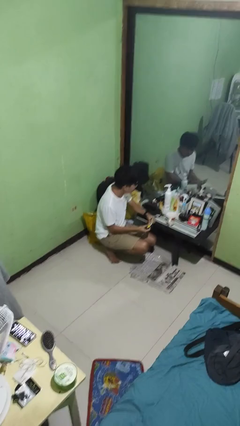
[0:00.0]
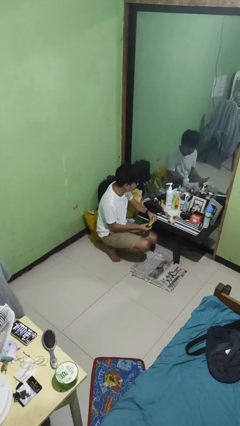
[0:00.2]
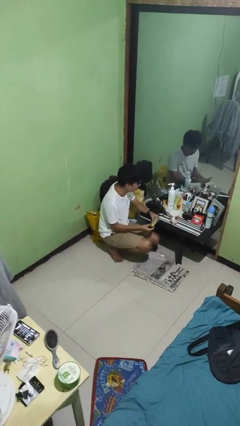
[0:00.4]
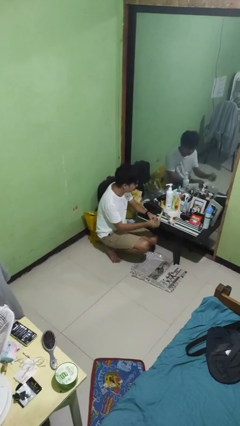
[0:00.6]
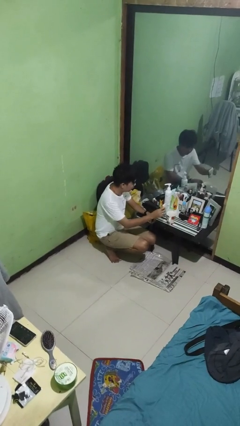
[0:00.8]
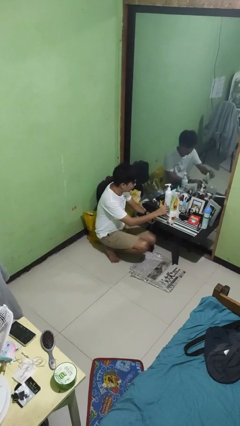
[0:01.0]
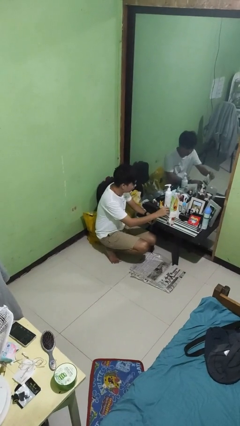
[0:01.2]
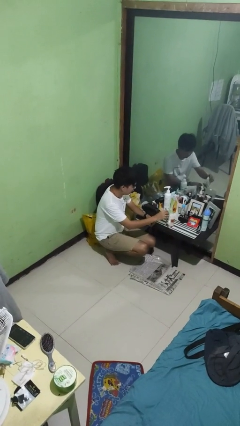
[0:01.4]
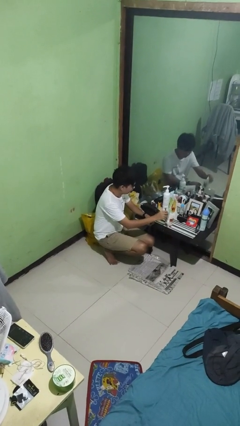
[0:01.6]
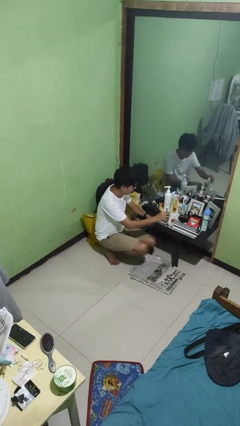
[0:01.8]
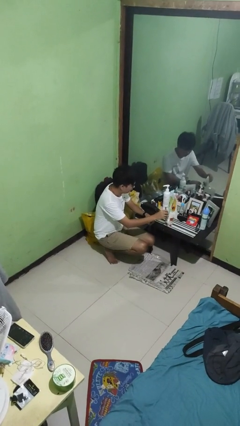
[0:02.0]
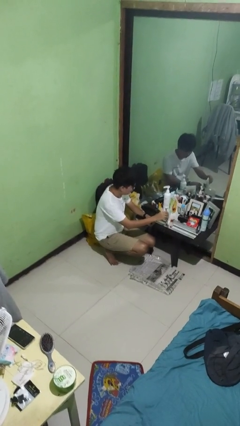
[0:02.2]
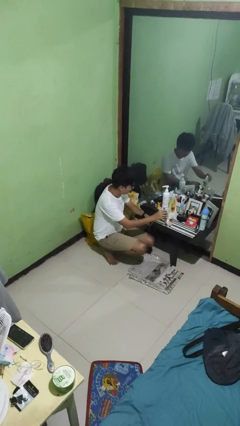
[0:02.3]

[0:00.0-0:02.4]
person pours coffee into mug

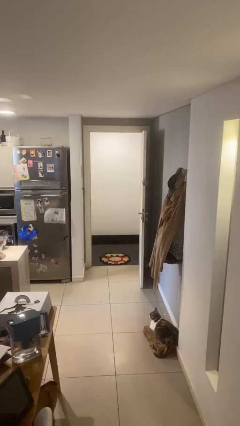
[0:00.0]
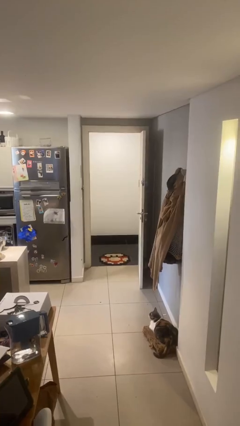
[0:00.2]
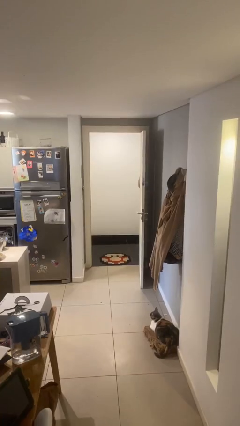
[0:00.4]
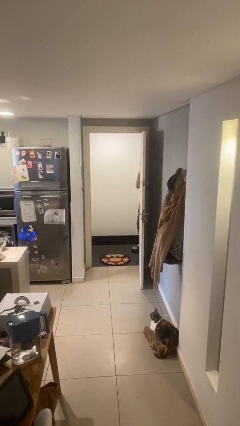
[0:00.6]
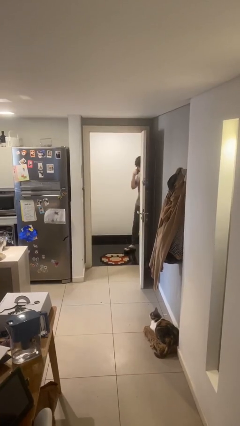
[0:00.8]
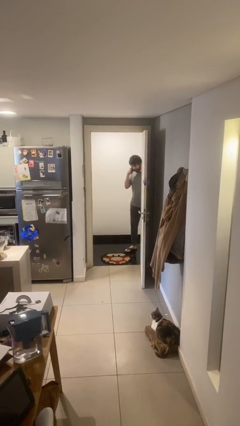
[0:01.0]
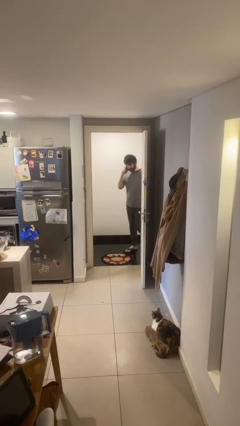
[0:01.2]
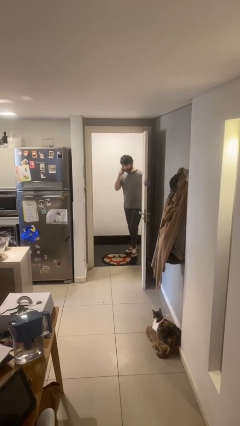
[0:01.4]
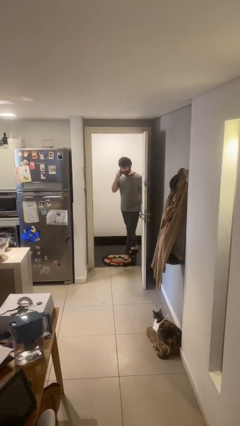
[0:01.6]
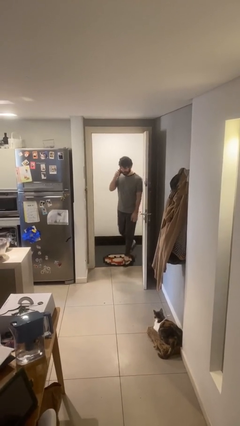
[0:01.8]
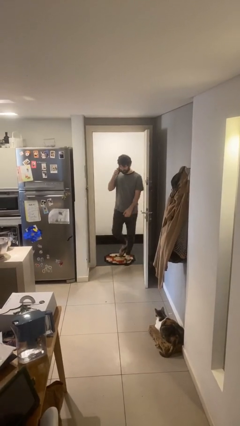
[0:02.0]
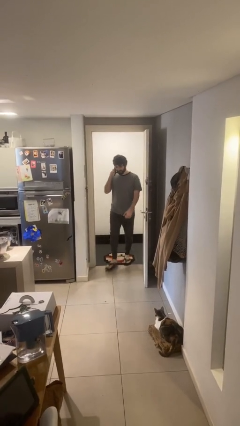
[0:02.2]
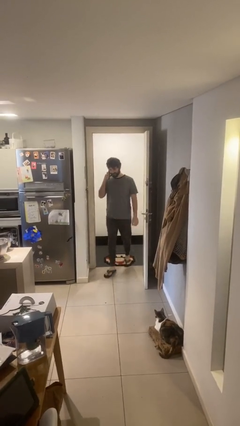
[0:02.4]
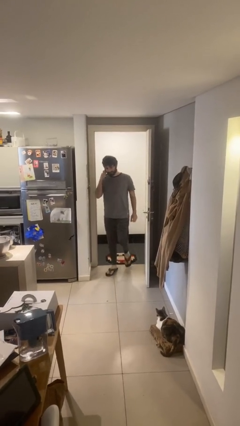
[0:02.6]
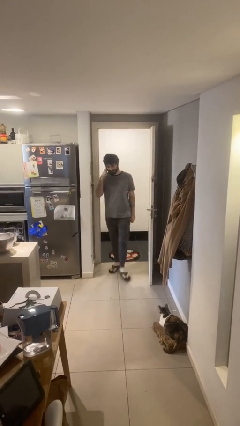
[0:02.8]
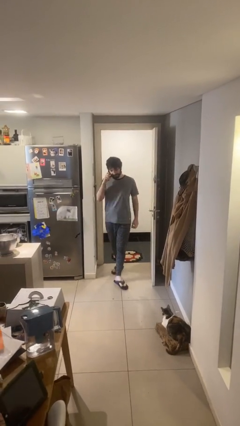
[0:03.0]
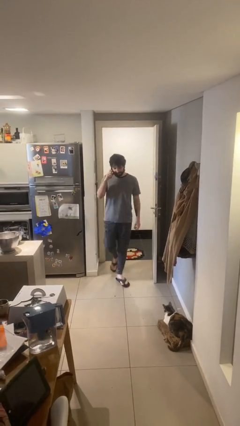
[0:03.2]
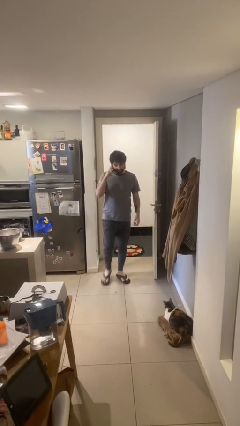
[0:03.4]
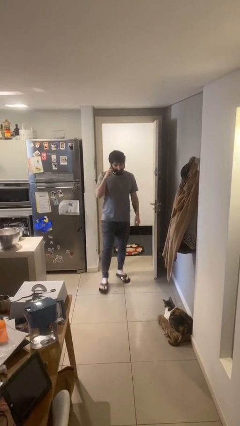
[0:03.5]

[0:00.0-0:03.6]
person enters scene through structure

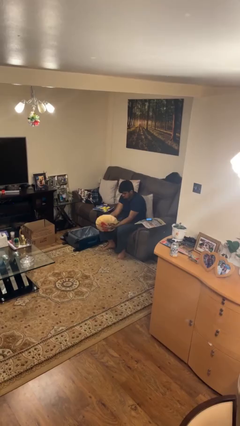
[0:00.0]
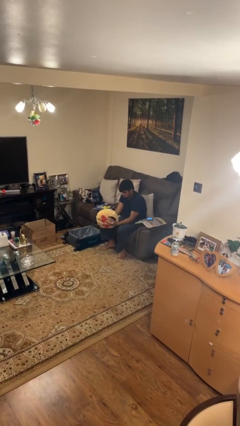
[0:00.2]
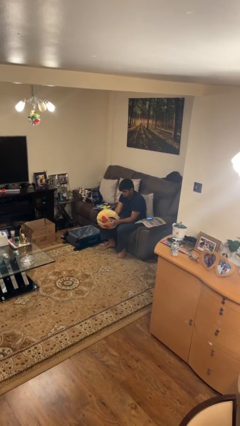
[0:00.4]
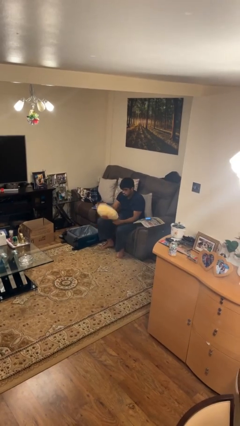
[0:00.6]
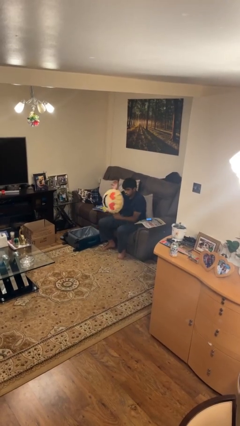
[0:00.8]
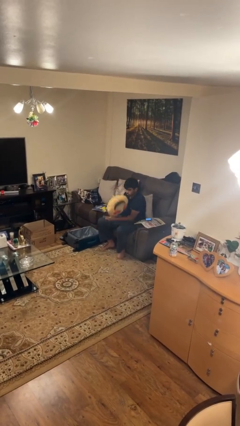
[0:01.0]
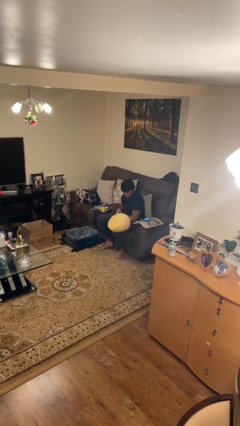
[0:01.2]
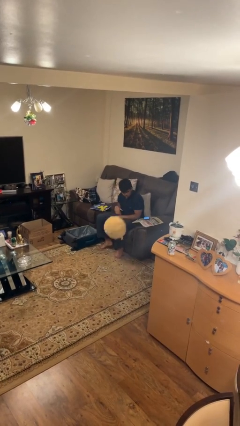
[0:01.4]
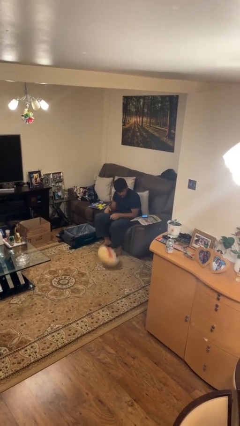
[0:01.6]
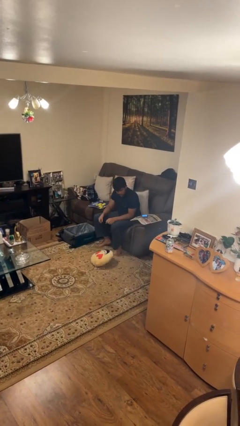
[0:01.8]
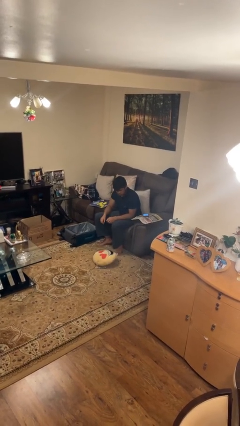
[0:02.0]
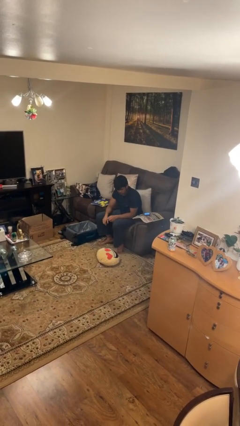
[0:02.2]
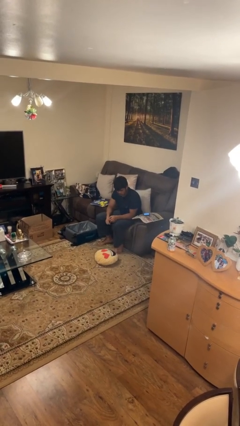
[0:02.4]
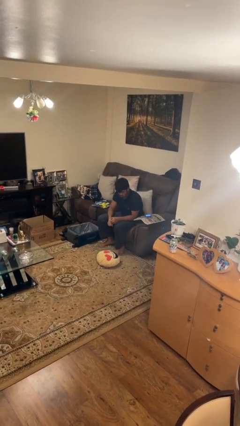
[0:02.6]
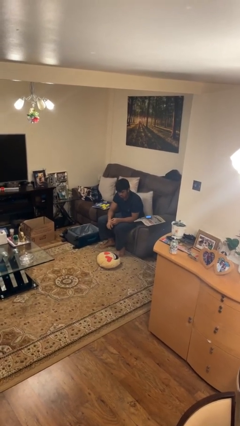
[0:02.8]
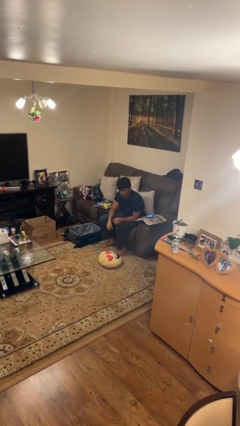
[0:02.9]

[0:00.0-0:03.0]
person drops object

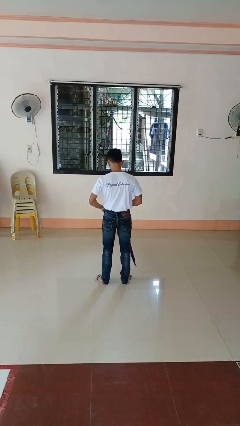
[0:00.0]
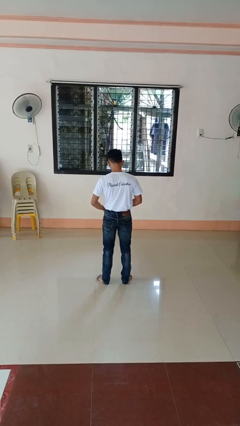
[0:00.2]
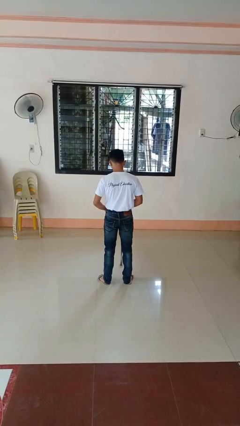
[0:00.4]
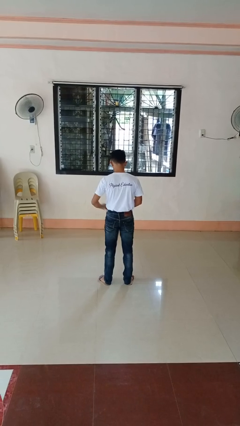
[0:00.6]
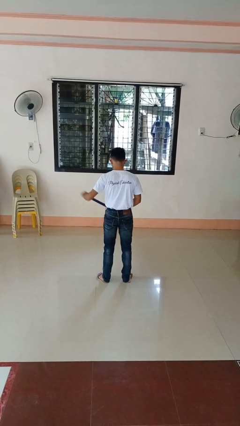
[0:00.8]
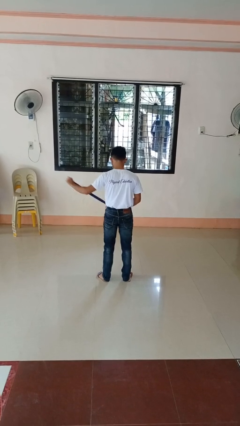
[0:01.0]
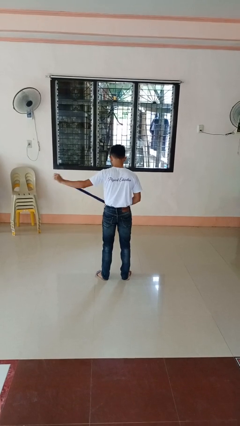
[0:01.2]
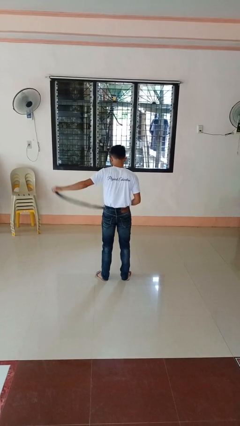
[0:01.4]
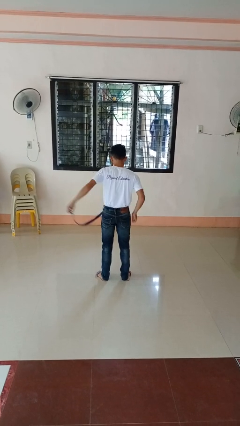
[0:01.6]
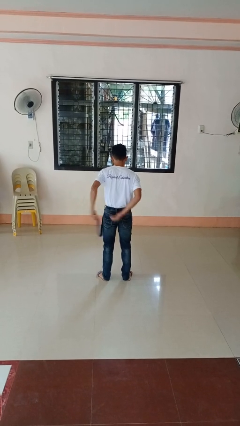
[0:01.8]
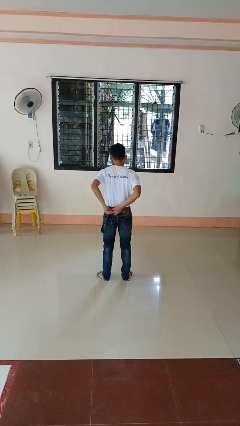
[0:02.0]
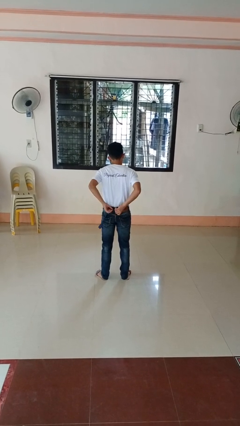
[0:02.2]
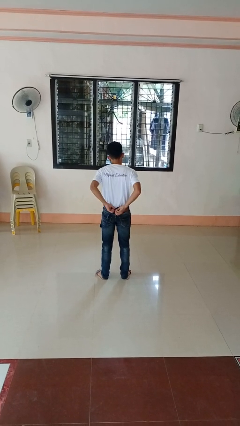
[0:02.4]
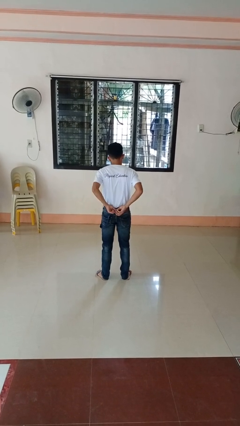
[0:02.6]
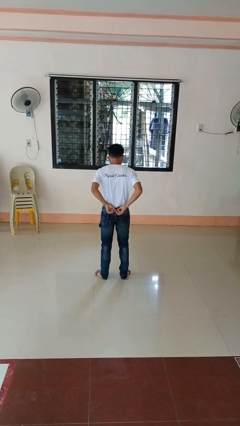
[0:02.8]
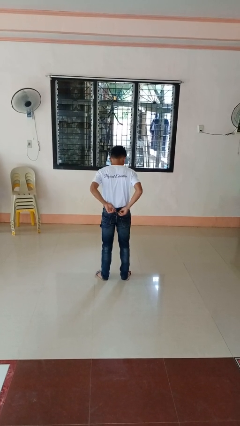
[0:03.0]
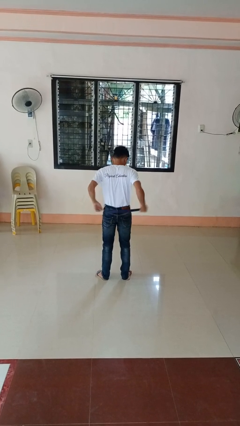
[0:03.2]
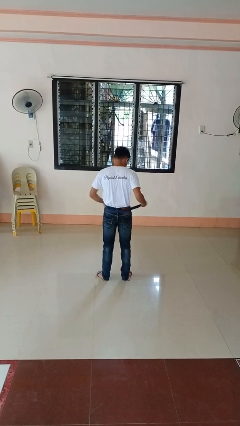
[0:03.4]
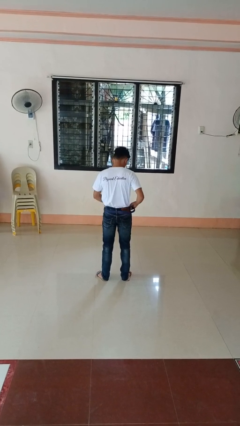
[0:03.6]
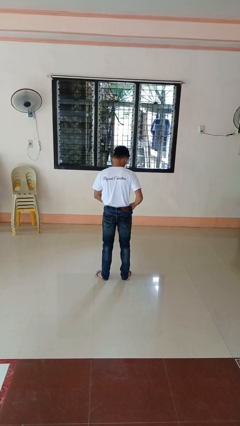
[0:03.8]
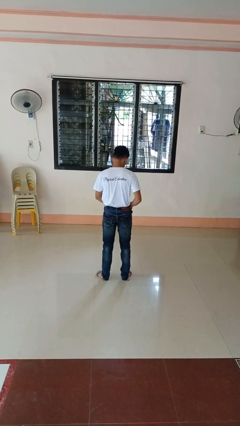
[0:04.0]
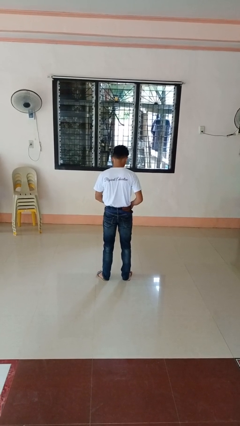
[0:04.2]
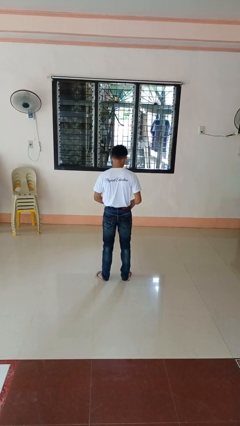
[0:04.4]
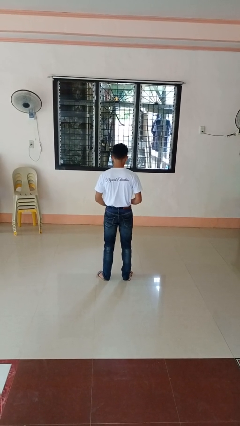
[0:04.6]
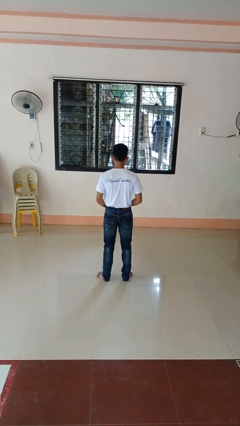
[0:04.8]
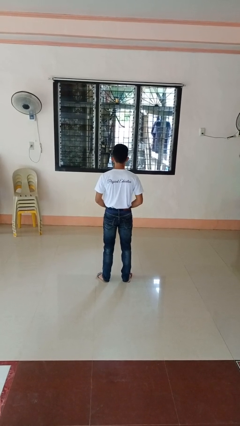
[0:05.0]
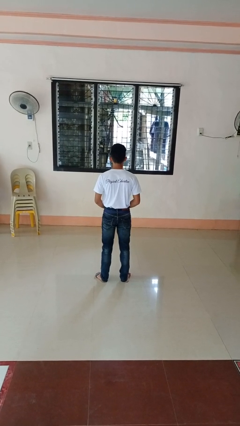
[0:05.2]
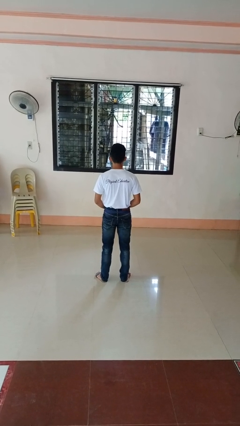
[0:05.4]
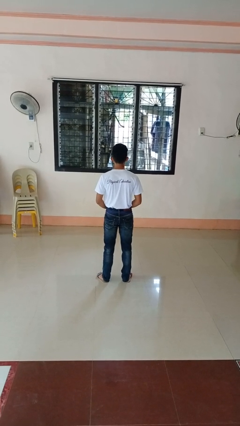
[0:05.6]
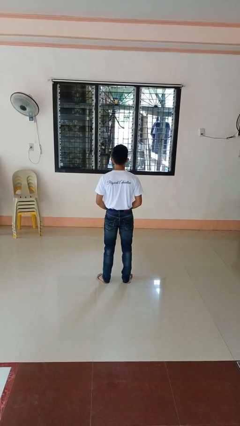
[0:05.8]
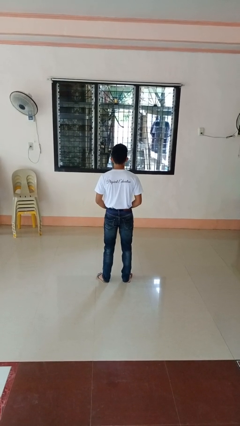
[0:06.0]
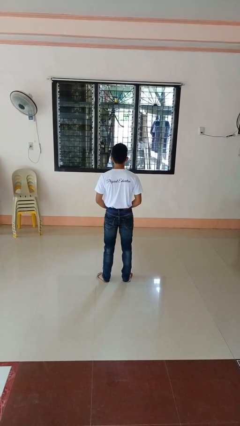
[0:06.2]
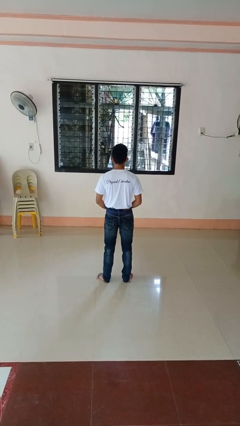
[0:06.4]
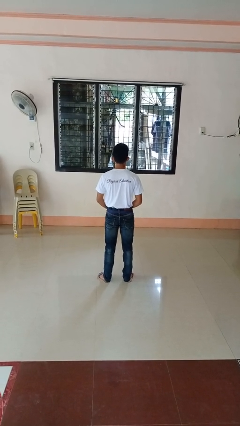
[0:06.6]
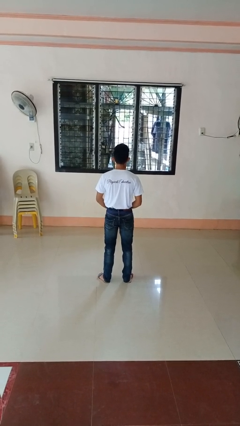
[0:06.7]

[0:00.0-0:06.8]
person puts on belt

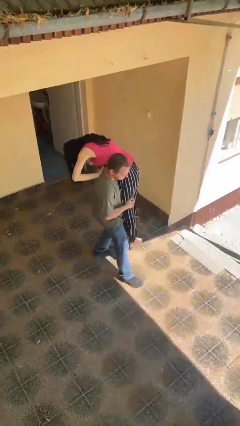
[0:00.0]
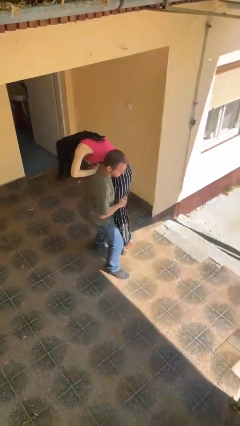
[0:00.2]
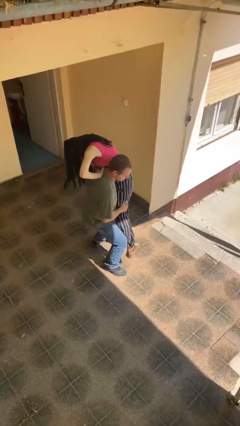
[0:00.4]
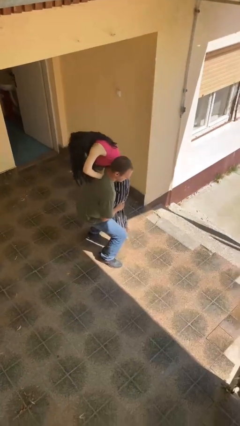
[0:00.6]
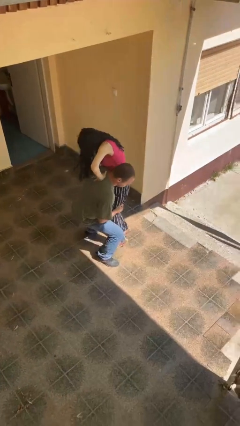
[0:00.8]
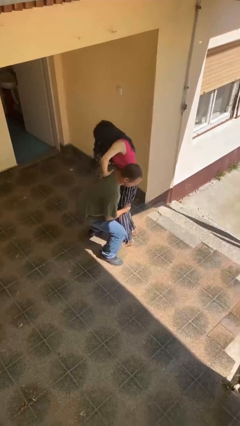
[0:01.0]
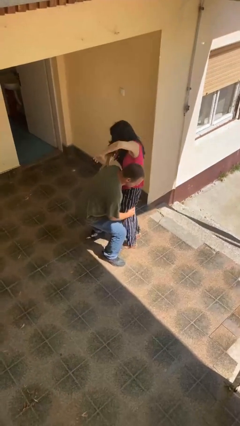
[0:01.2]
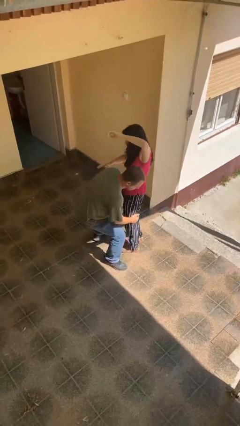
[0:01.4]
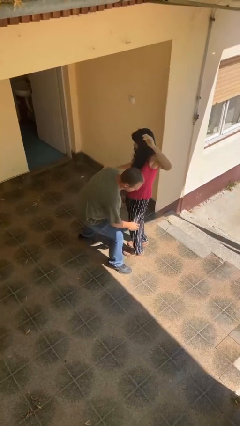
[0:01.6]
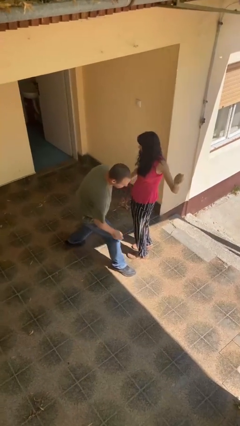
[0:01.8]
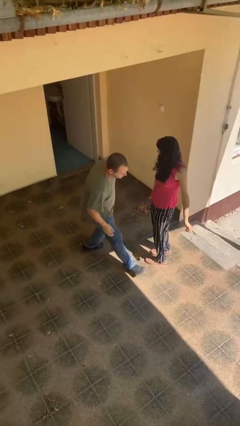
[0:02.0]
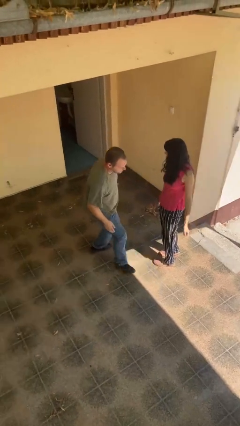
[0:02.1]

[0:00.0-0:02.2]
person puts down person
